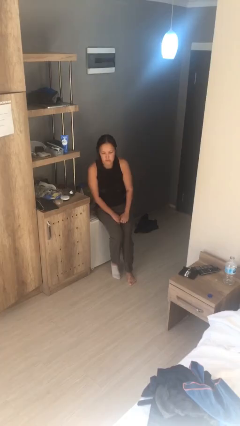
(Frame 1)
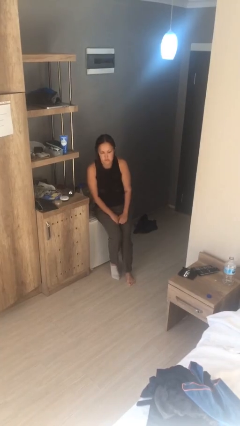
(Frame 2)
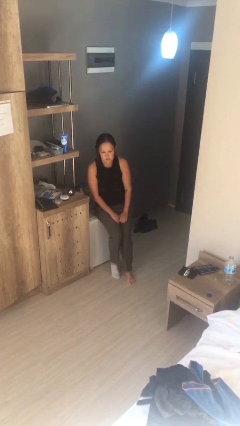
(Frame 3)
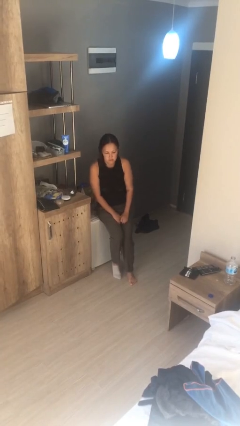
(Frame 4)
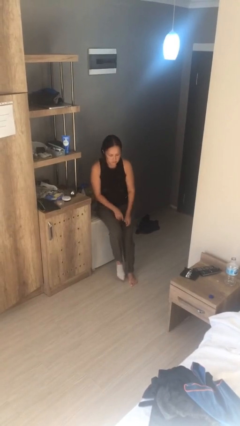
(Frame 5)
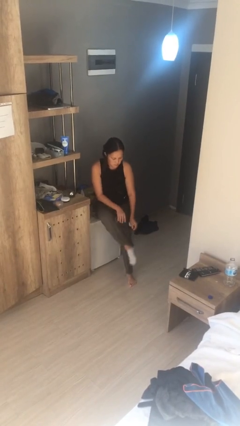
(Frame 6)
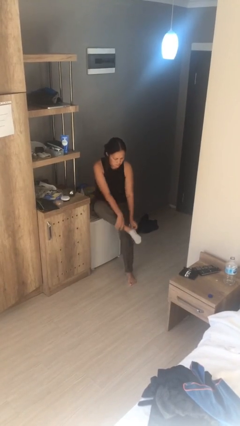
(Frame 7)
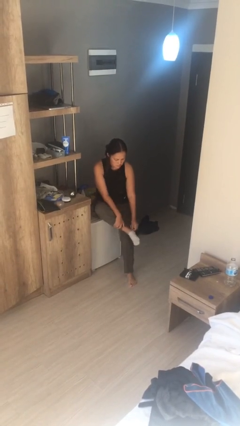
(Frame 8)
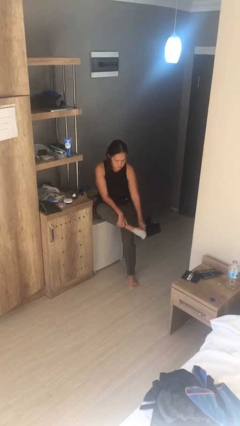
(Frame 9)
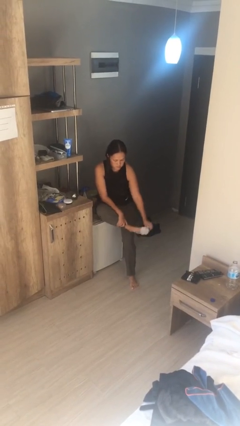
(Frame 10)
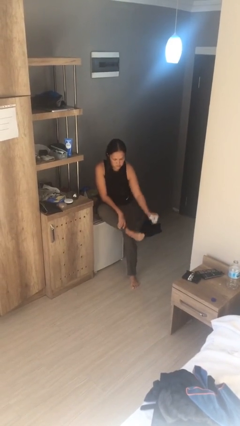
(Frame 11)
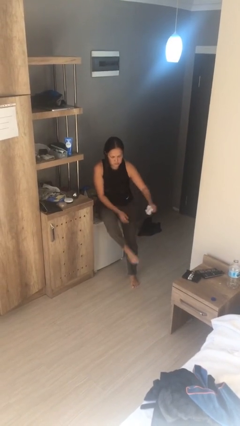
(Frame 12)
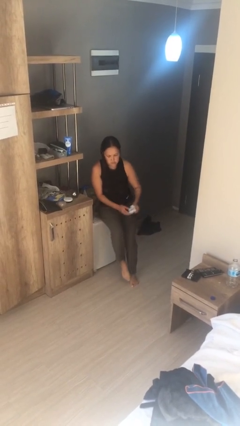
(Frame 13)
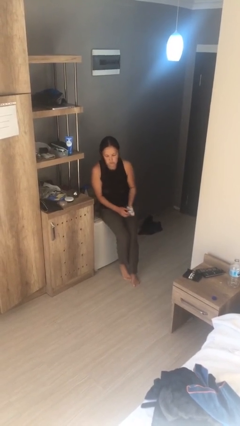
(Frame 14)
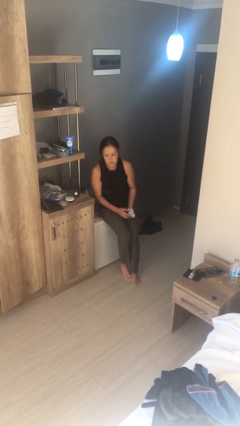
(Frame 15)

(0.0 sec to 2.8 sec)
person takes off socks

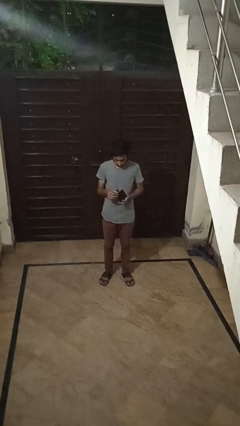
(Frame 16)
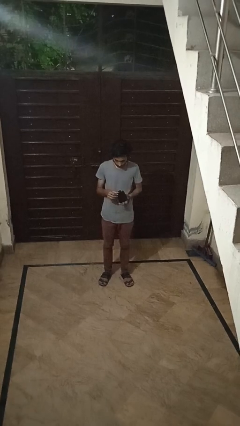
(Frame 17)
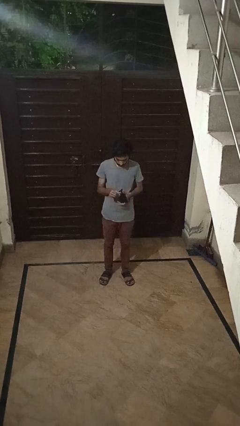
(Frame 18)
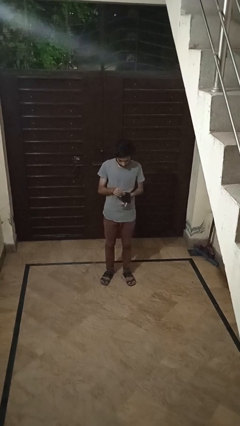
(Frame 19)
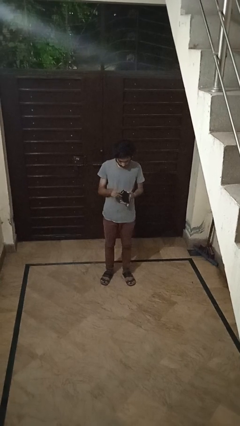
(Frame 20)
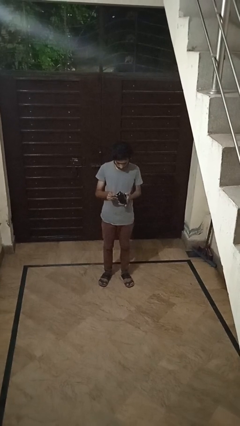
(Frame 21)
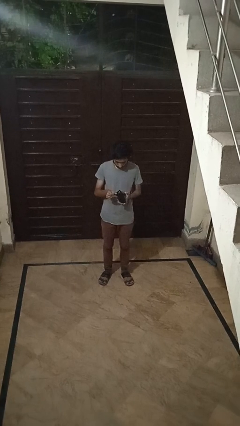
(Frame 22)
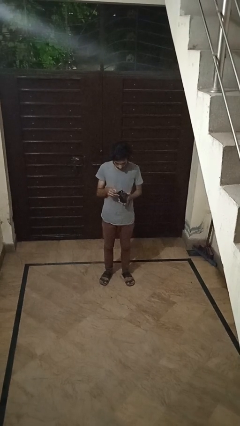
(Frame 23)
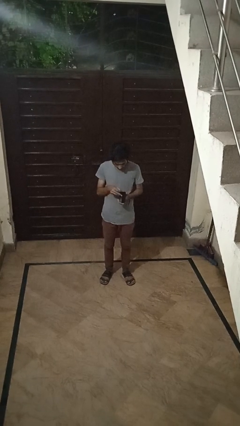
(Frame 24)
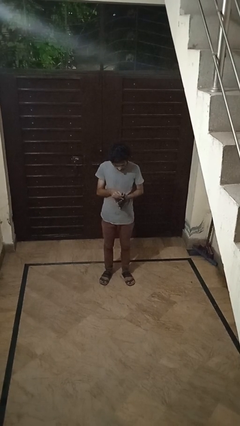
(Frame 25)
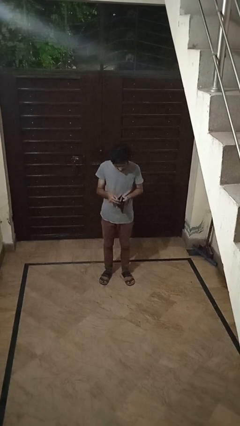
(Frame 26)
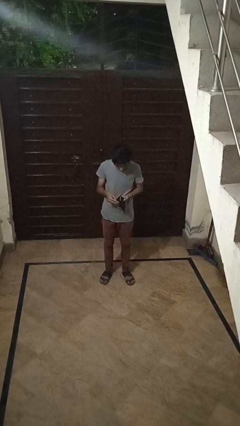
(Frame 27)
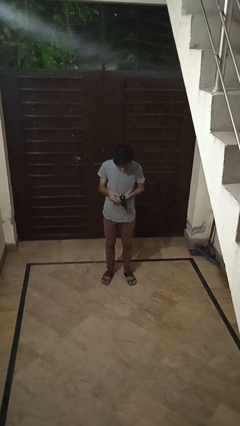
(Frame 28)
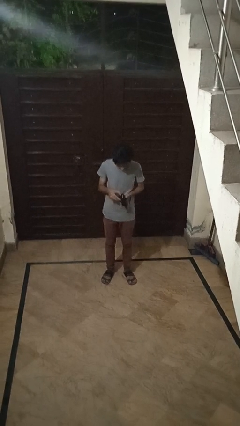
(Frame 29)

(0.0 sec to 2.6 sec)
person searches in purse

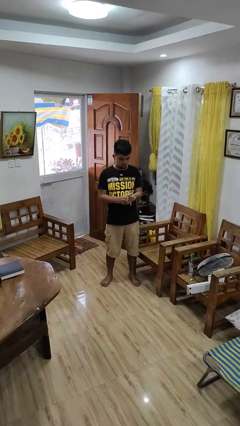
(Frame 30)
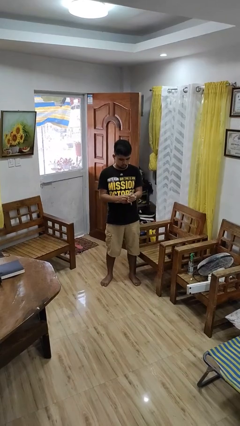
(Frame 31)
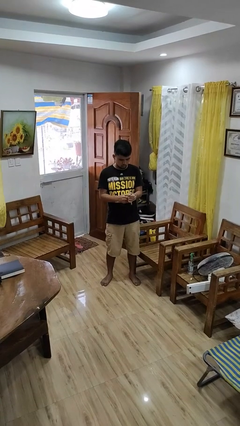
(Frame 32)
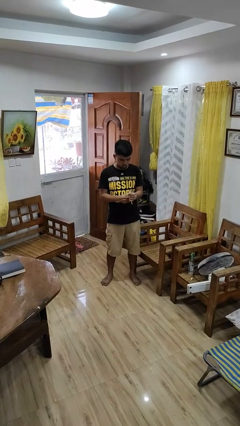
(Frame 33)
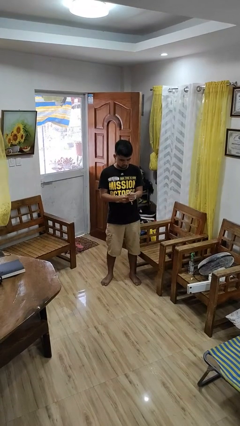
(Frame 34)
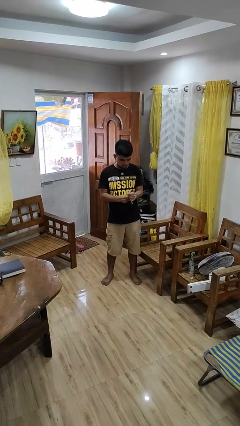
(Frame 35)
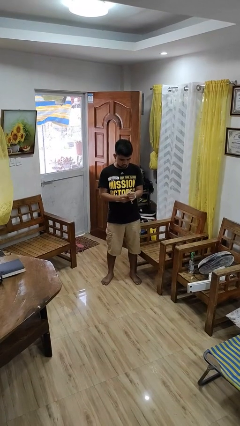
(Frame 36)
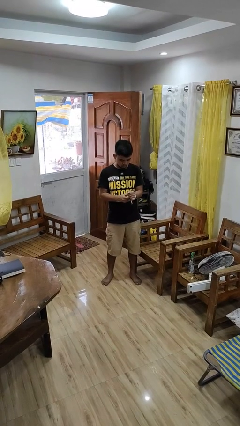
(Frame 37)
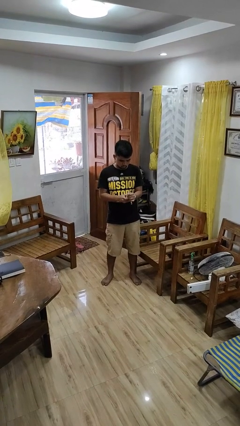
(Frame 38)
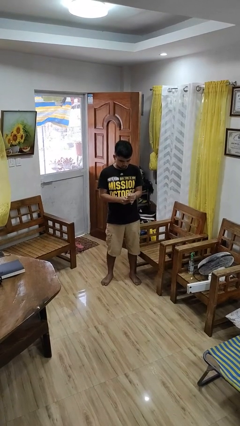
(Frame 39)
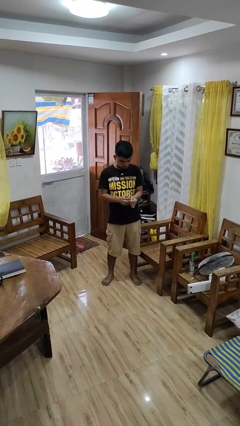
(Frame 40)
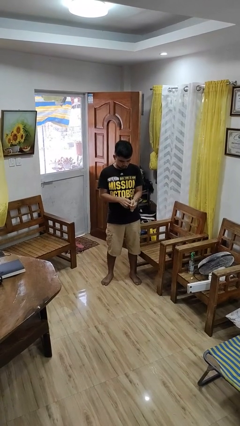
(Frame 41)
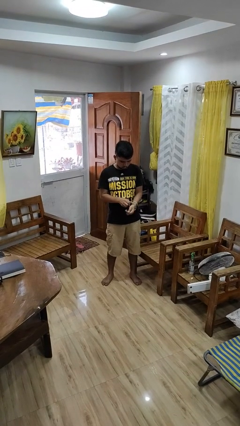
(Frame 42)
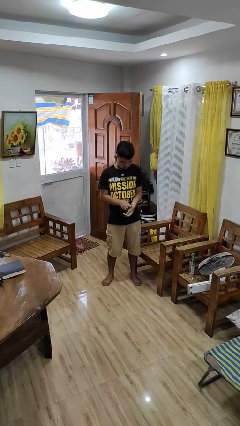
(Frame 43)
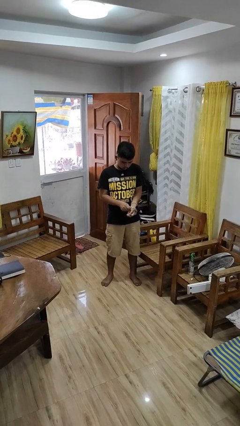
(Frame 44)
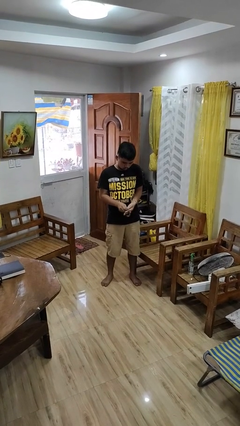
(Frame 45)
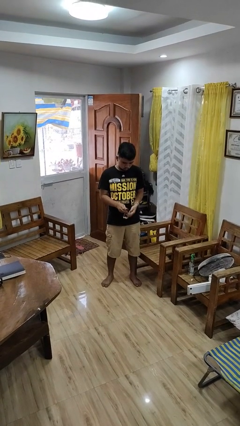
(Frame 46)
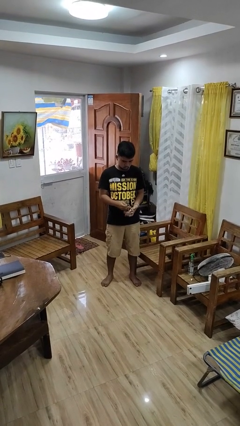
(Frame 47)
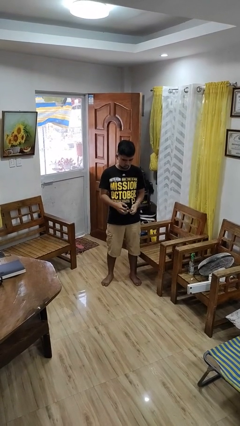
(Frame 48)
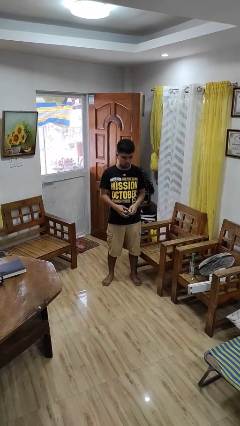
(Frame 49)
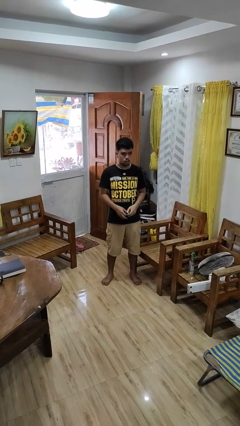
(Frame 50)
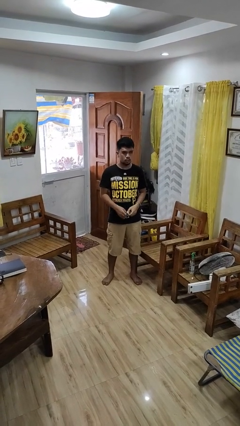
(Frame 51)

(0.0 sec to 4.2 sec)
person takes off wristwatch

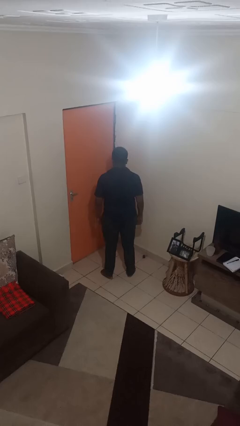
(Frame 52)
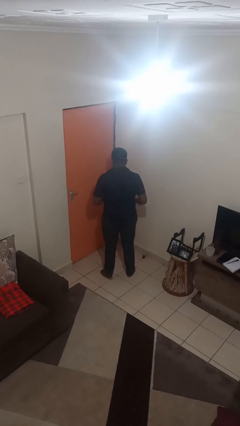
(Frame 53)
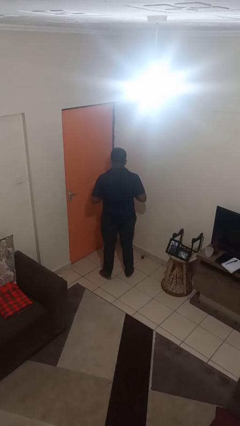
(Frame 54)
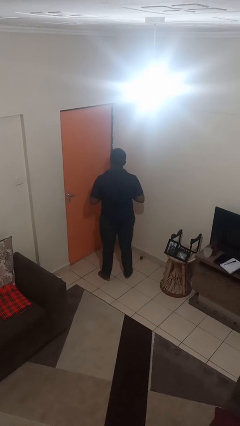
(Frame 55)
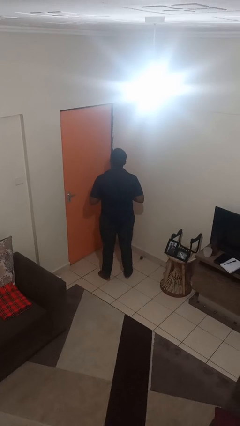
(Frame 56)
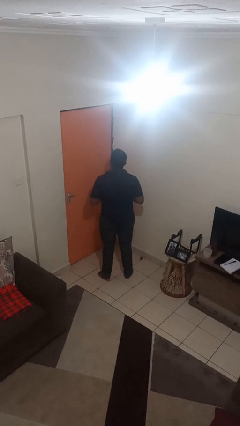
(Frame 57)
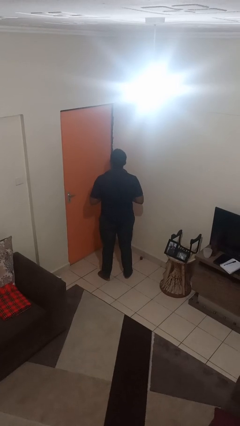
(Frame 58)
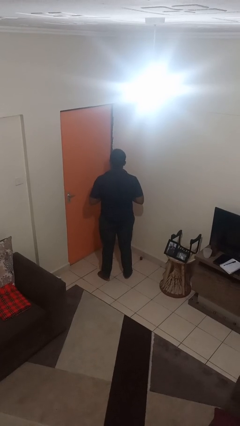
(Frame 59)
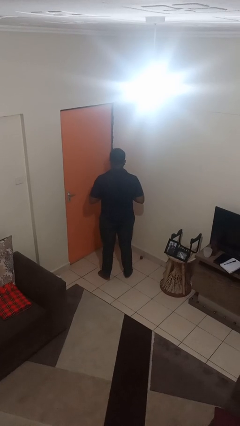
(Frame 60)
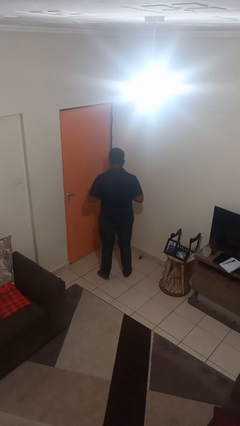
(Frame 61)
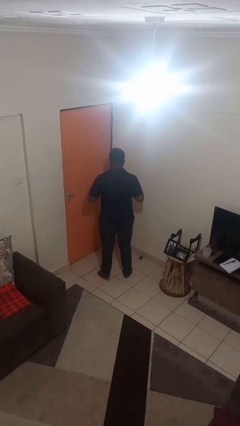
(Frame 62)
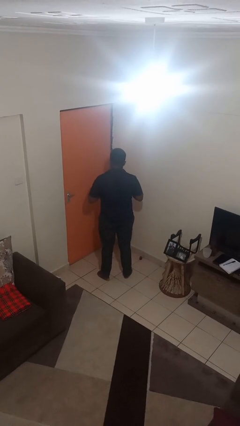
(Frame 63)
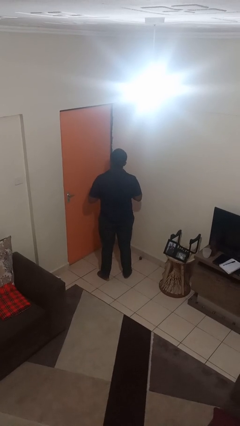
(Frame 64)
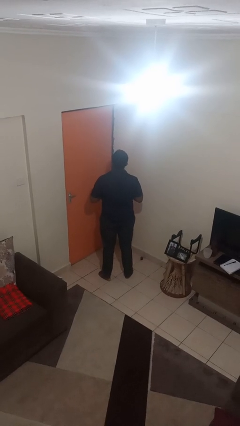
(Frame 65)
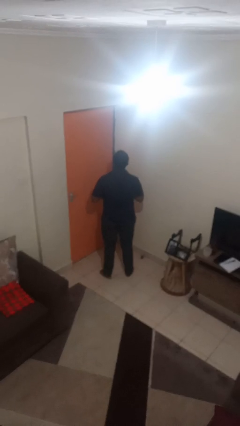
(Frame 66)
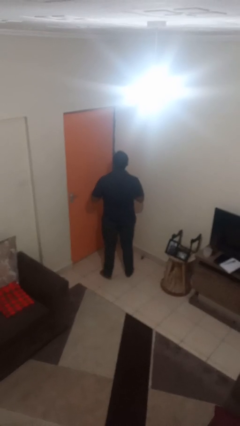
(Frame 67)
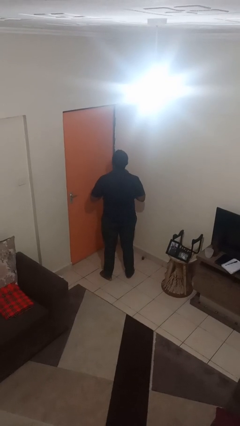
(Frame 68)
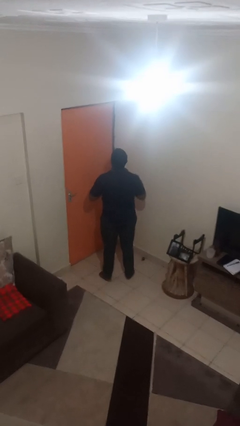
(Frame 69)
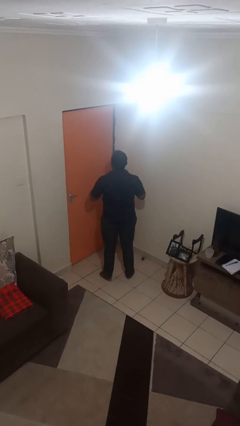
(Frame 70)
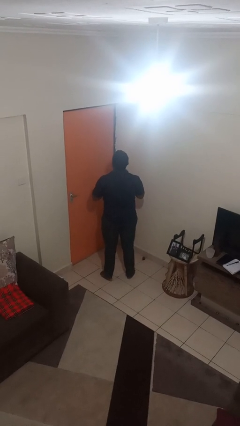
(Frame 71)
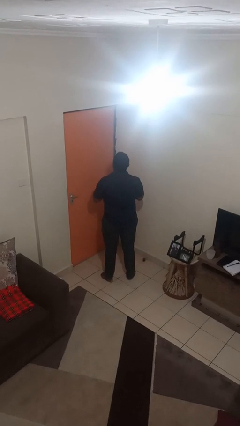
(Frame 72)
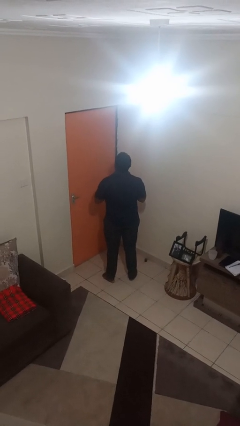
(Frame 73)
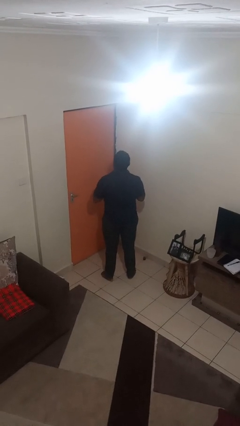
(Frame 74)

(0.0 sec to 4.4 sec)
person buttons shirt

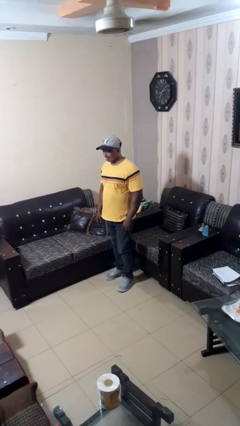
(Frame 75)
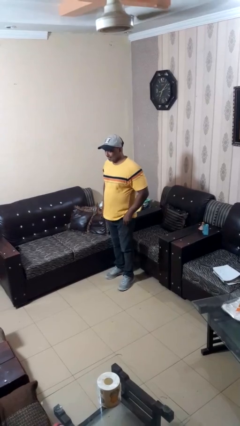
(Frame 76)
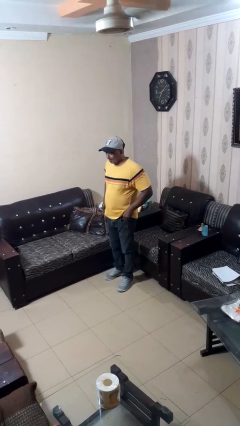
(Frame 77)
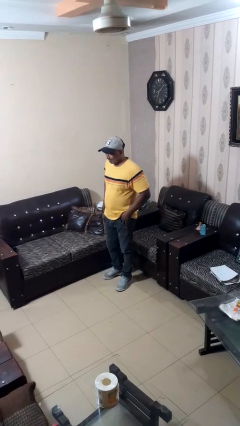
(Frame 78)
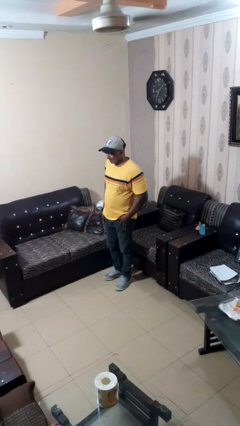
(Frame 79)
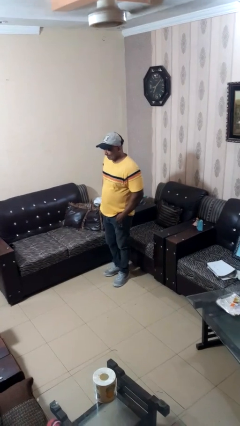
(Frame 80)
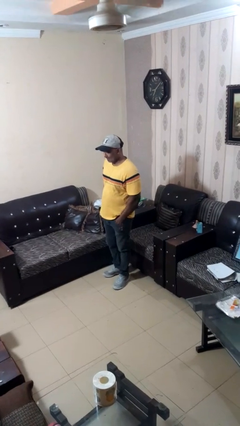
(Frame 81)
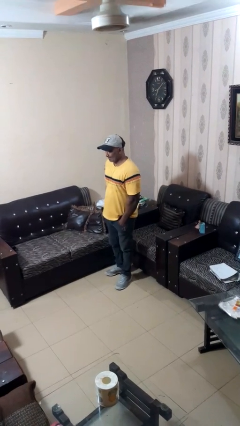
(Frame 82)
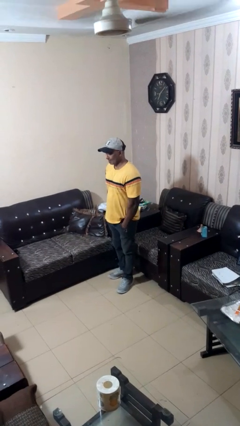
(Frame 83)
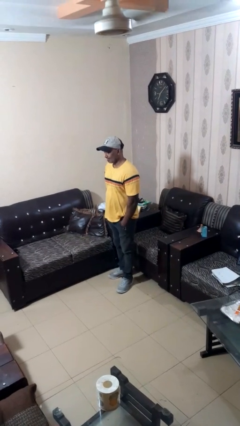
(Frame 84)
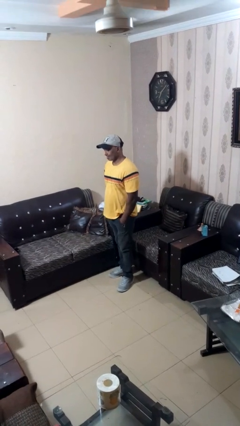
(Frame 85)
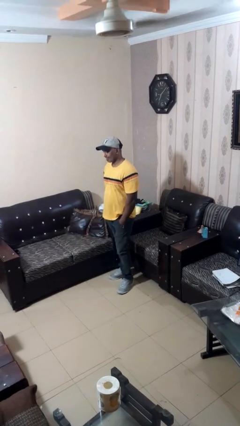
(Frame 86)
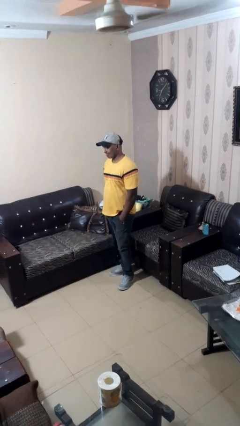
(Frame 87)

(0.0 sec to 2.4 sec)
person puts hands in back pockets

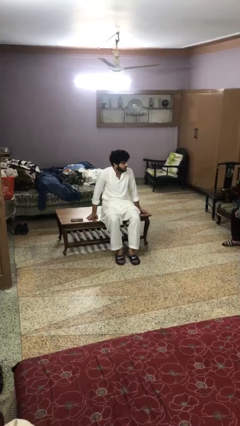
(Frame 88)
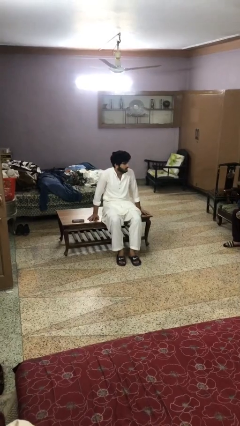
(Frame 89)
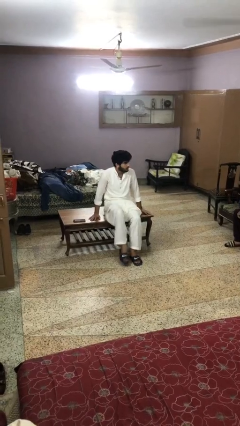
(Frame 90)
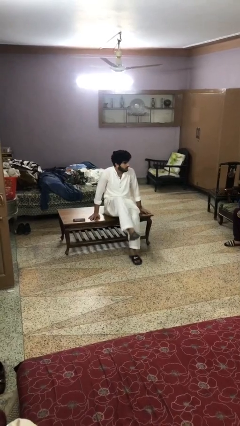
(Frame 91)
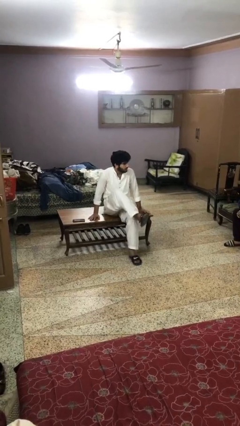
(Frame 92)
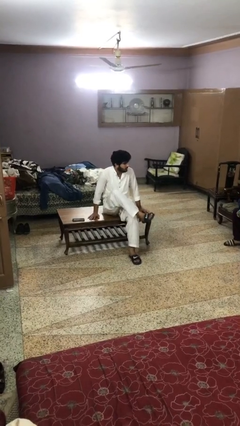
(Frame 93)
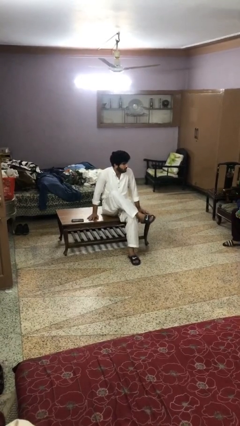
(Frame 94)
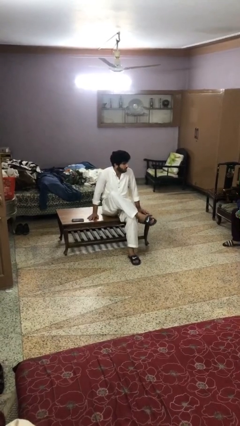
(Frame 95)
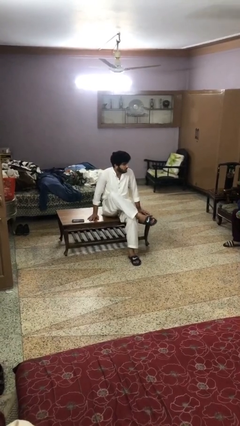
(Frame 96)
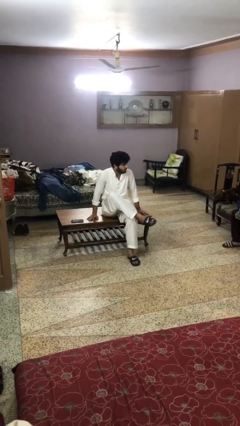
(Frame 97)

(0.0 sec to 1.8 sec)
person crosses legs
